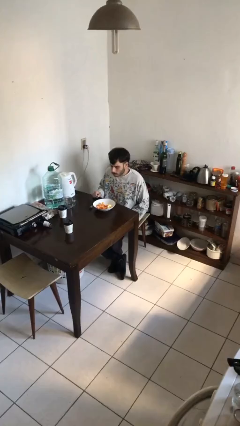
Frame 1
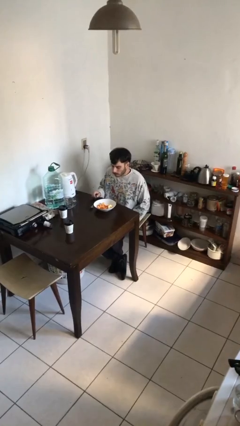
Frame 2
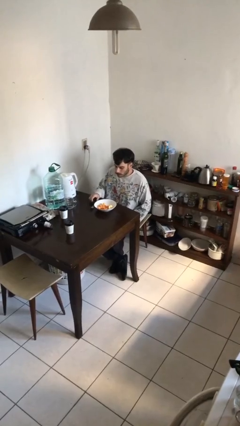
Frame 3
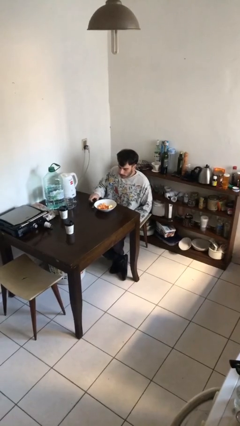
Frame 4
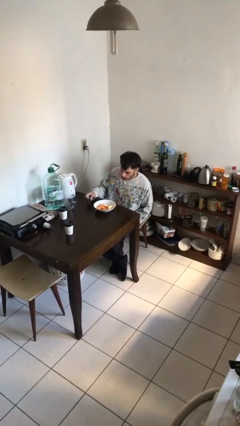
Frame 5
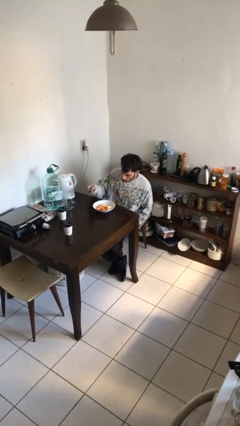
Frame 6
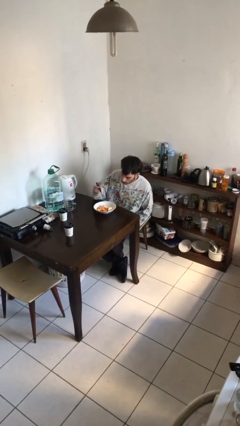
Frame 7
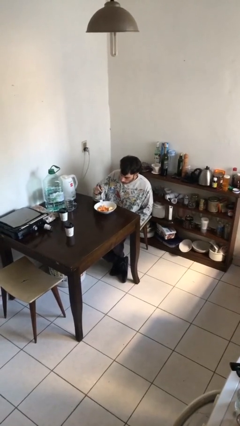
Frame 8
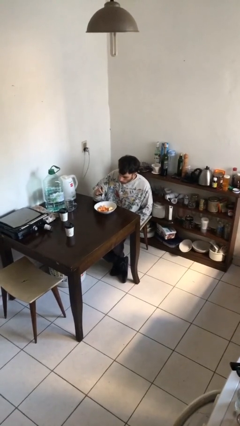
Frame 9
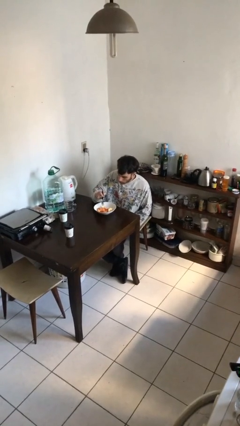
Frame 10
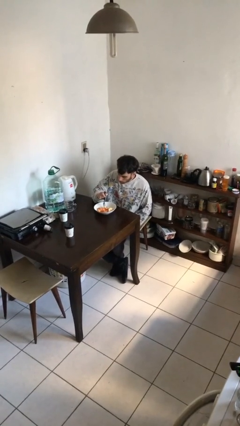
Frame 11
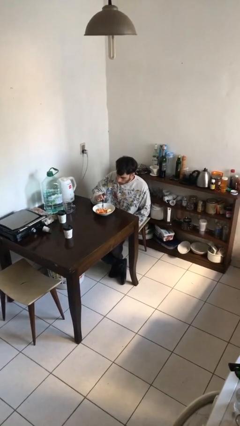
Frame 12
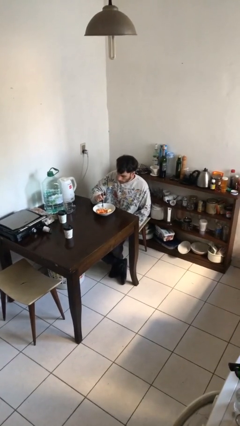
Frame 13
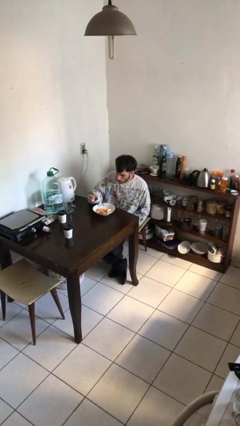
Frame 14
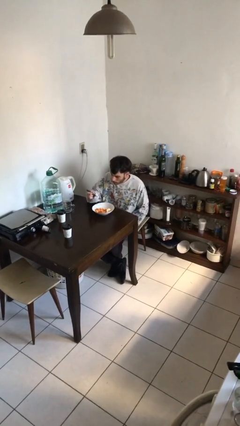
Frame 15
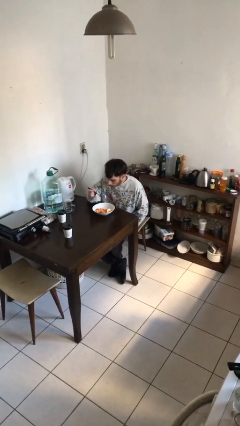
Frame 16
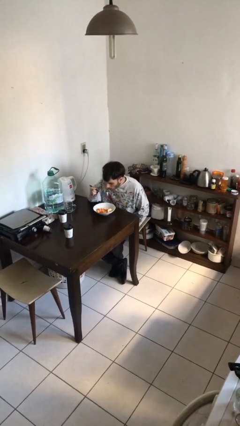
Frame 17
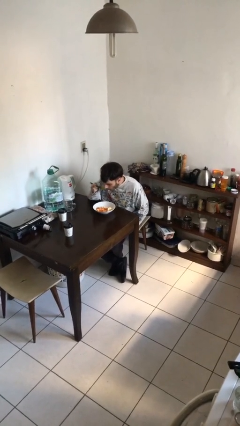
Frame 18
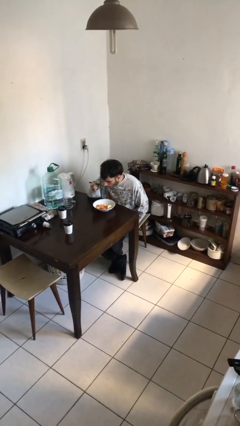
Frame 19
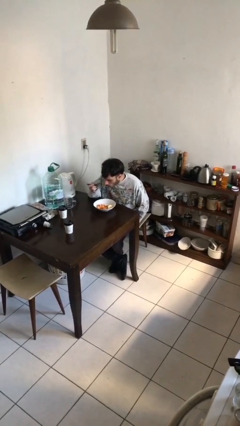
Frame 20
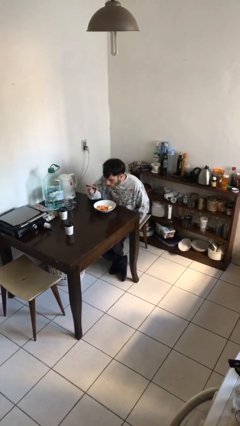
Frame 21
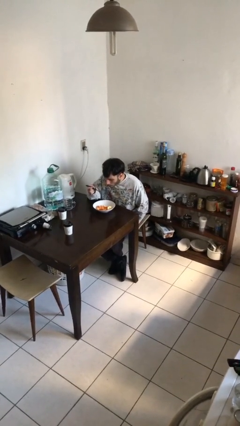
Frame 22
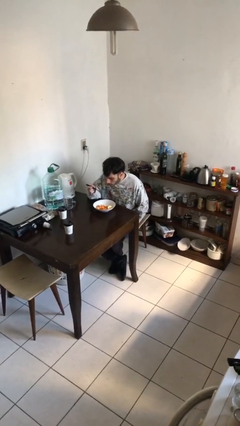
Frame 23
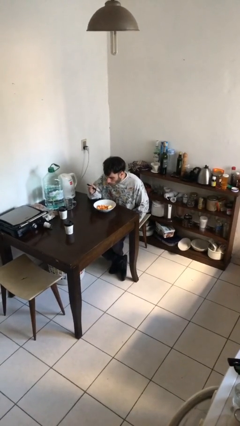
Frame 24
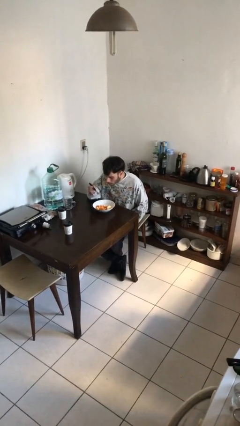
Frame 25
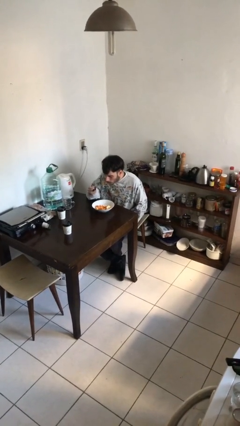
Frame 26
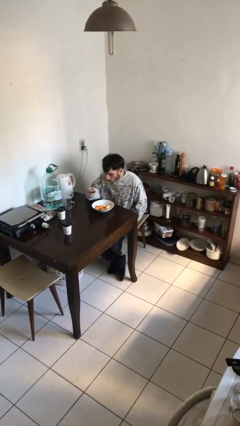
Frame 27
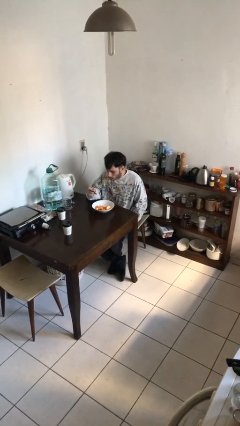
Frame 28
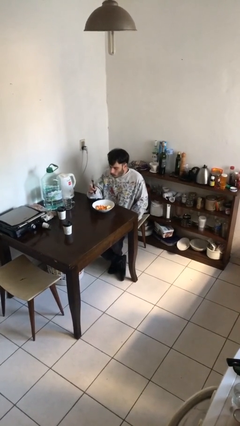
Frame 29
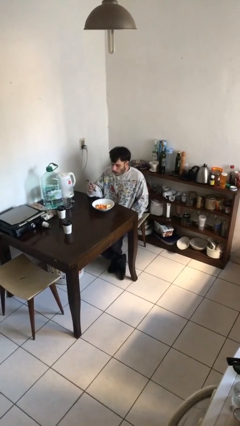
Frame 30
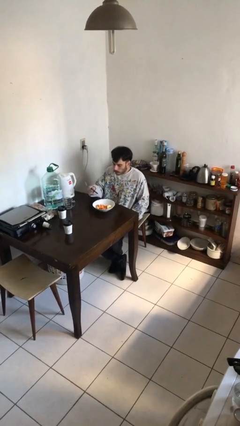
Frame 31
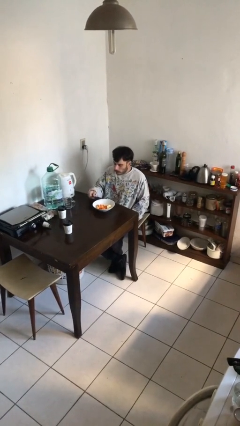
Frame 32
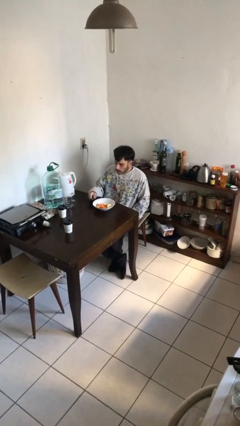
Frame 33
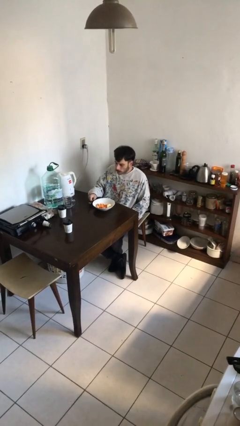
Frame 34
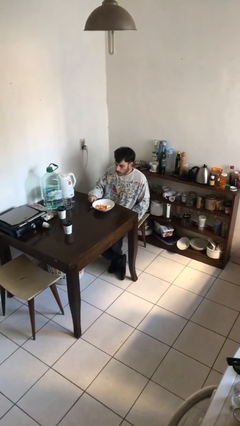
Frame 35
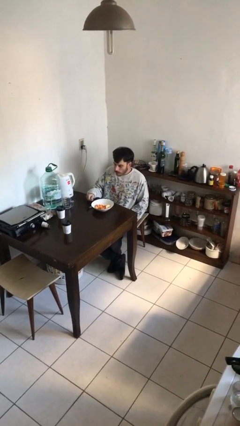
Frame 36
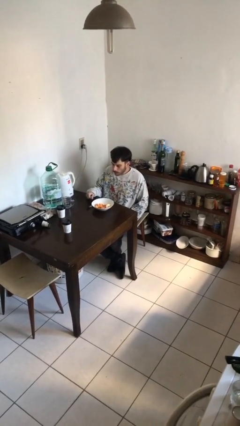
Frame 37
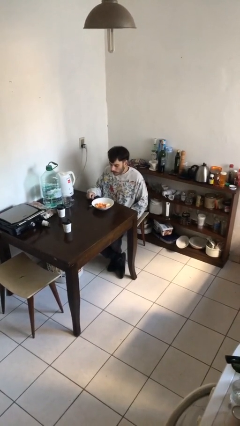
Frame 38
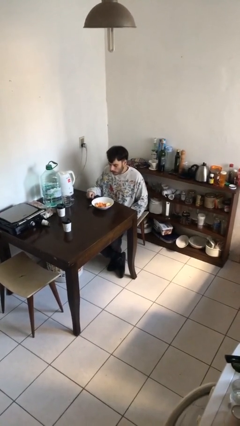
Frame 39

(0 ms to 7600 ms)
person eats with utensil

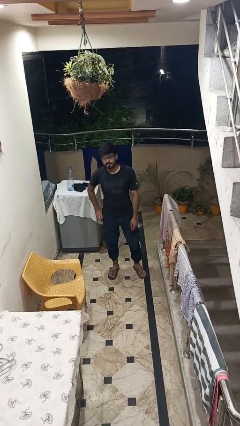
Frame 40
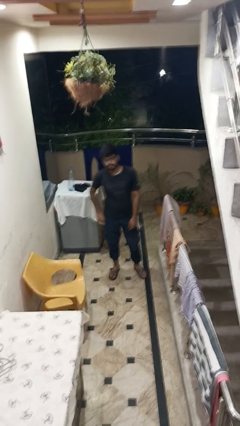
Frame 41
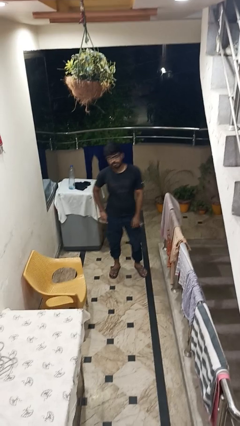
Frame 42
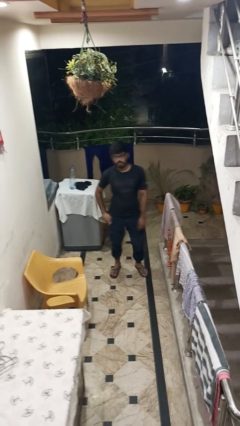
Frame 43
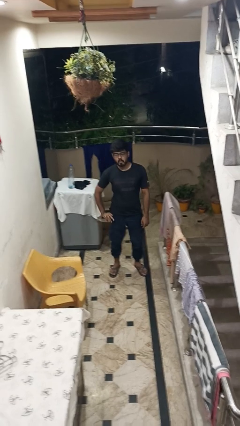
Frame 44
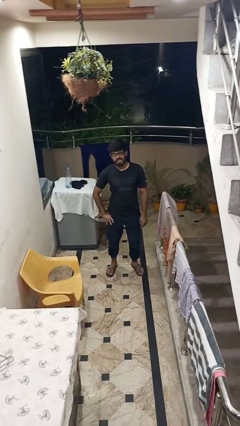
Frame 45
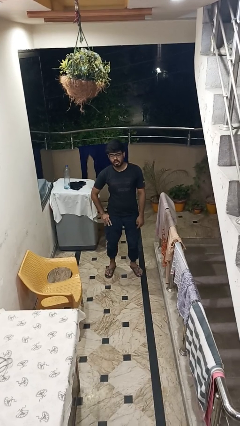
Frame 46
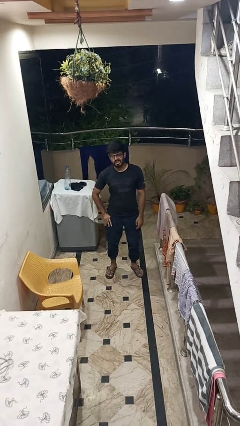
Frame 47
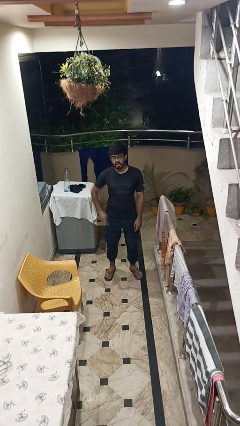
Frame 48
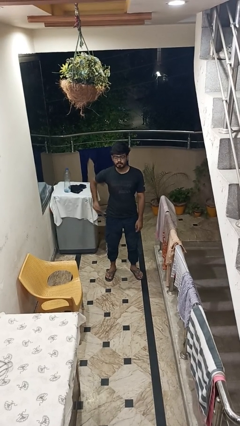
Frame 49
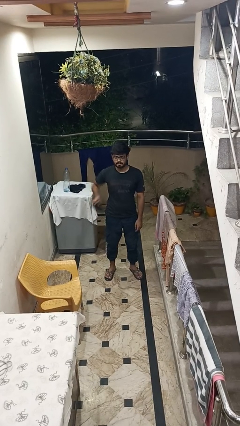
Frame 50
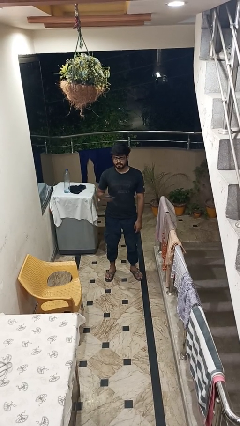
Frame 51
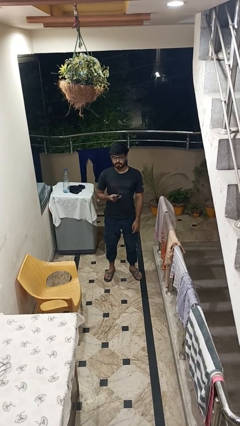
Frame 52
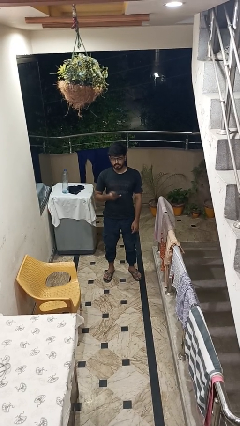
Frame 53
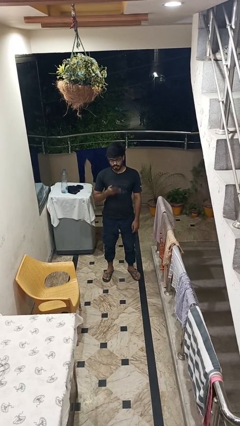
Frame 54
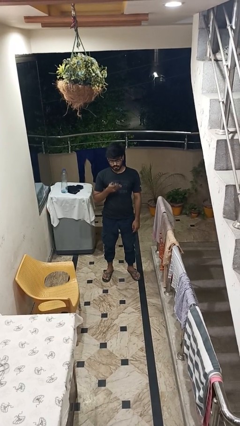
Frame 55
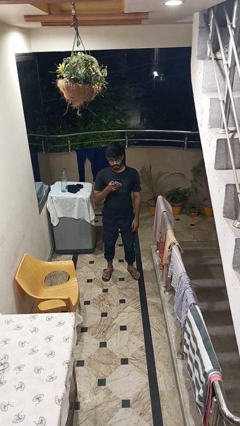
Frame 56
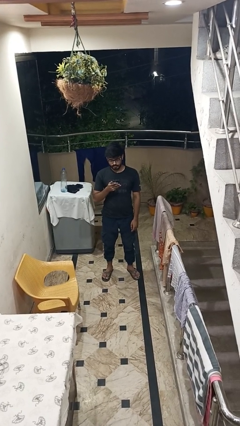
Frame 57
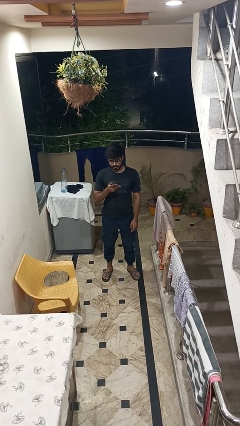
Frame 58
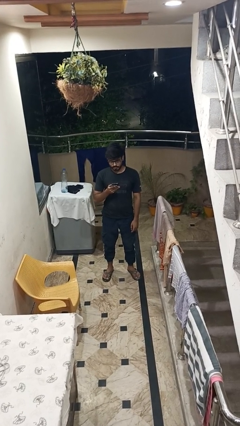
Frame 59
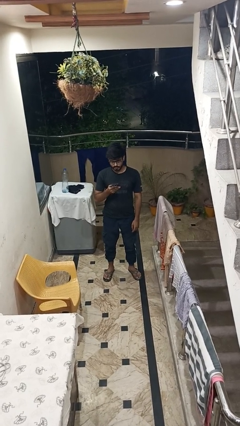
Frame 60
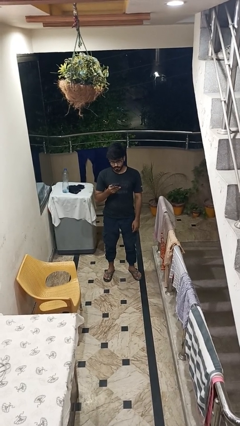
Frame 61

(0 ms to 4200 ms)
person takes phone from pocket

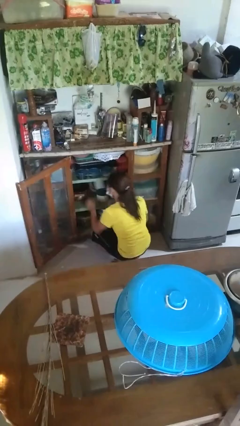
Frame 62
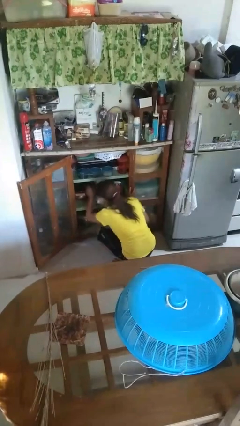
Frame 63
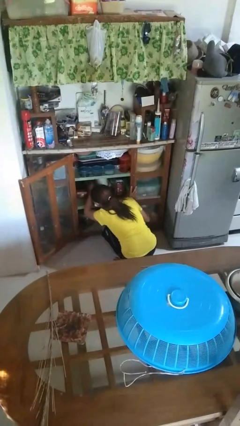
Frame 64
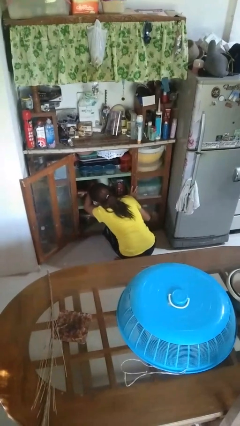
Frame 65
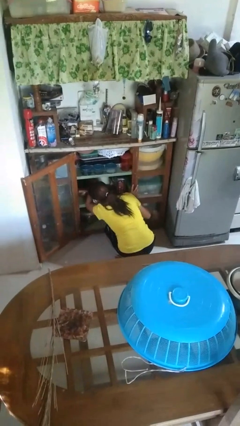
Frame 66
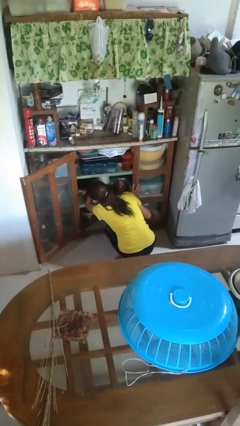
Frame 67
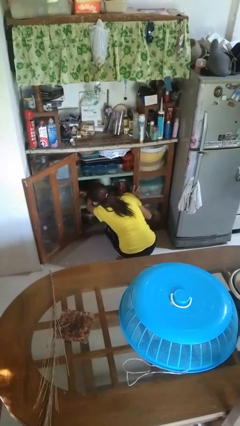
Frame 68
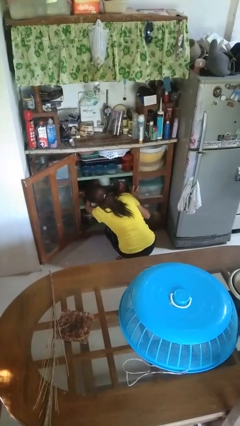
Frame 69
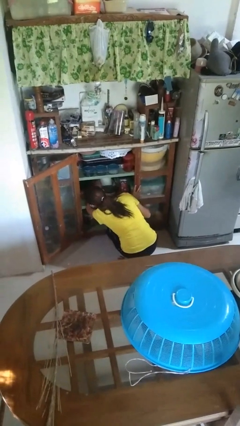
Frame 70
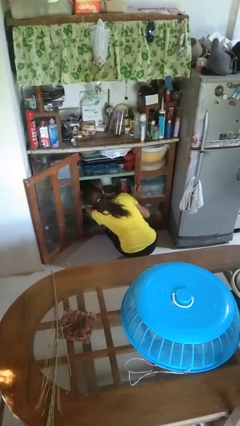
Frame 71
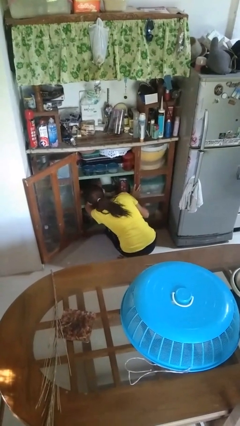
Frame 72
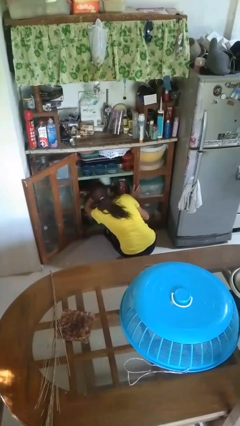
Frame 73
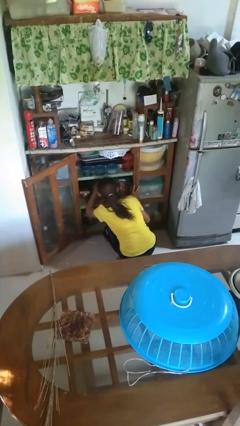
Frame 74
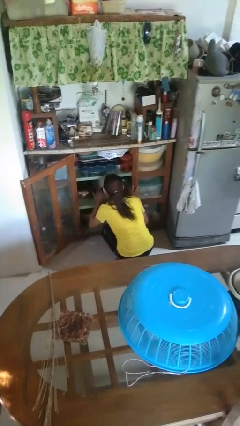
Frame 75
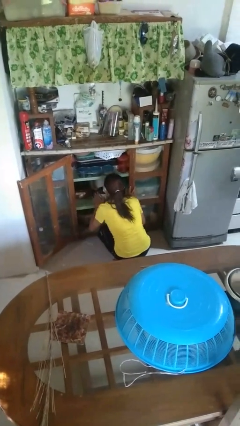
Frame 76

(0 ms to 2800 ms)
person searches in cabinet

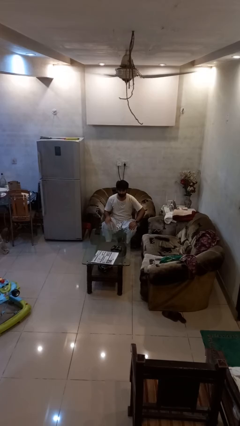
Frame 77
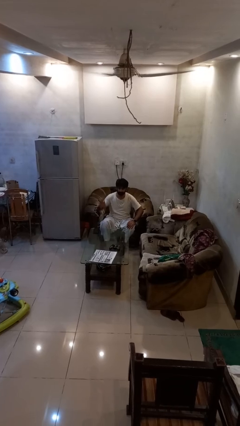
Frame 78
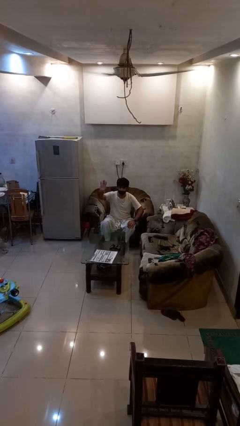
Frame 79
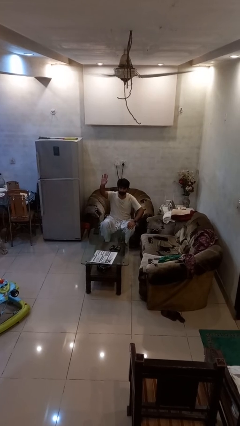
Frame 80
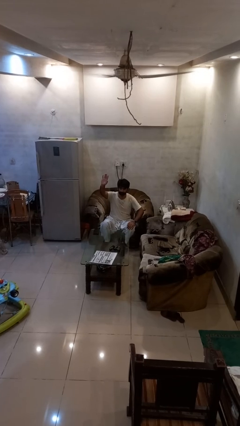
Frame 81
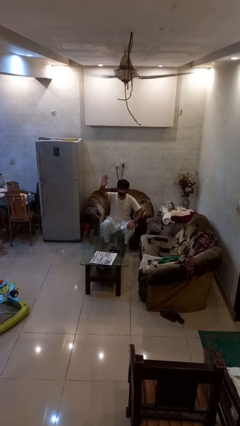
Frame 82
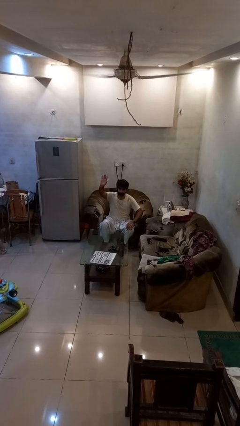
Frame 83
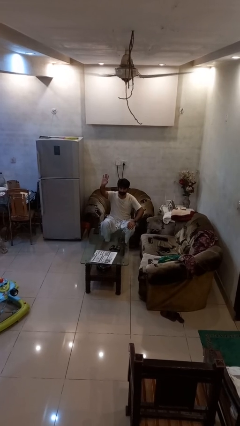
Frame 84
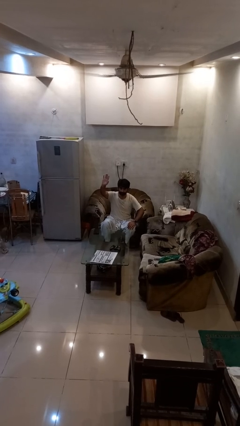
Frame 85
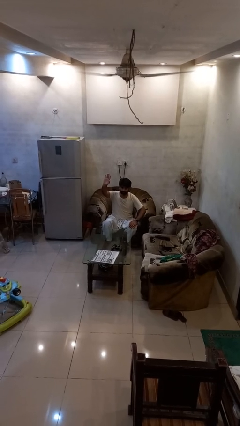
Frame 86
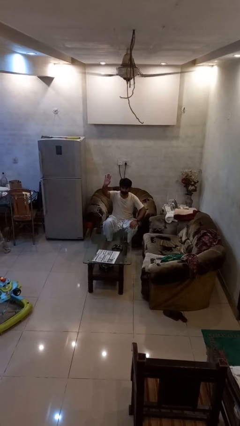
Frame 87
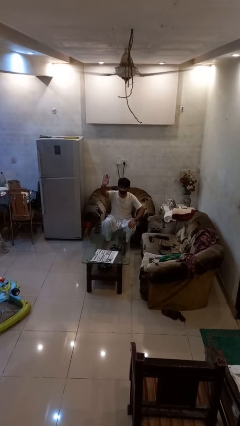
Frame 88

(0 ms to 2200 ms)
person gestures raise hand

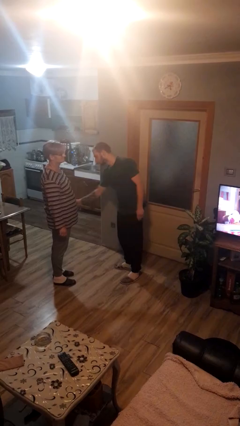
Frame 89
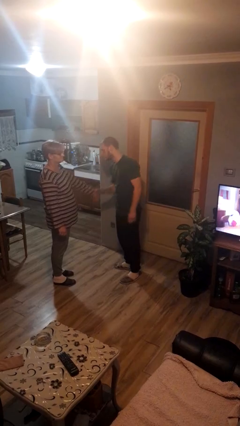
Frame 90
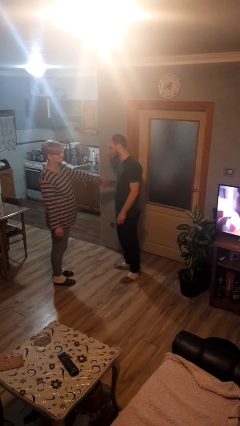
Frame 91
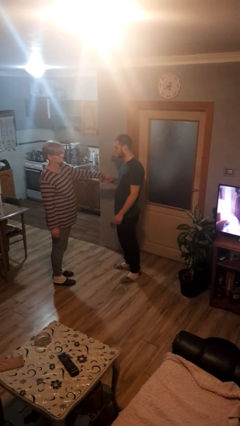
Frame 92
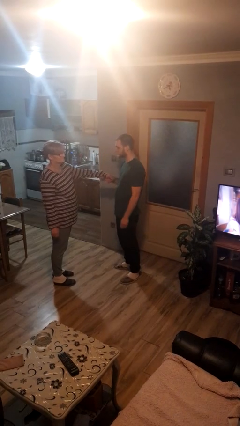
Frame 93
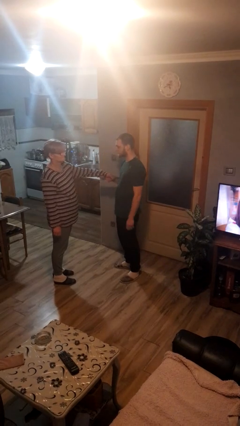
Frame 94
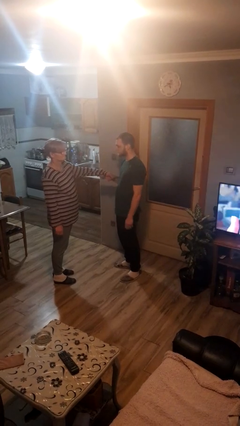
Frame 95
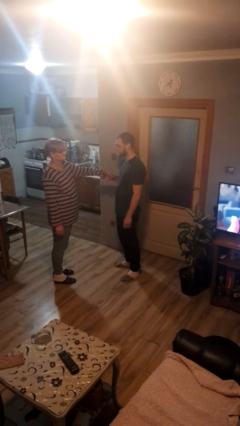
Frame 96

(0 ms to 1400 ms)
person grabs person by forearm
